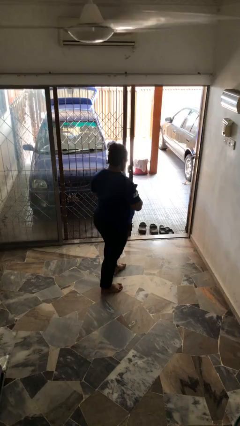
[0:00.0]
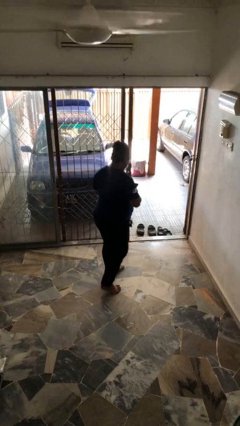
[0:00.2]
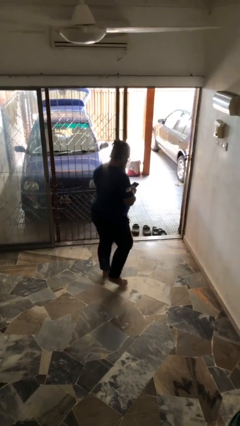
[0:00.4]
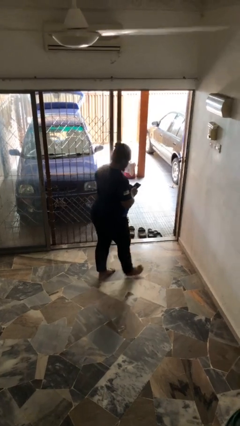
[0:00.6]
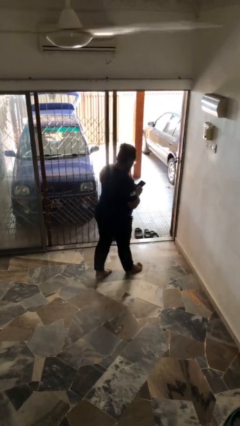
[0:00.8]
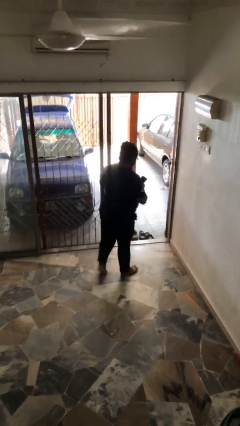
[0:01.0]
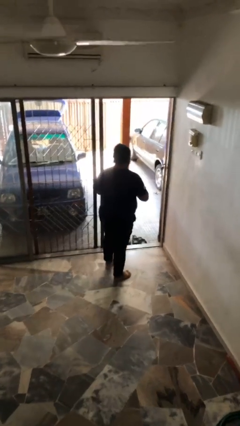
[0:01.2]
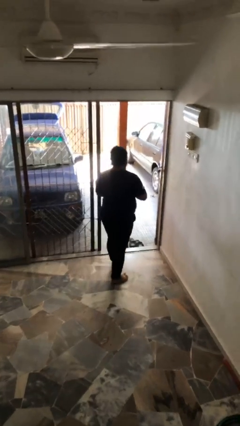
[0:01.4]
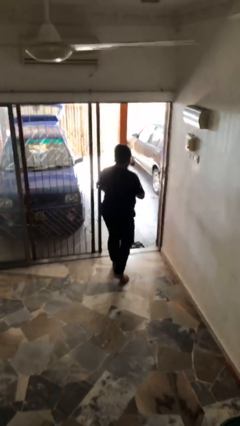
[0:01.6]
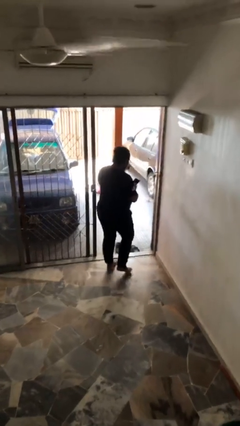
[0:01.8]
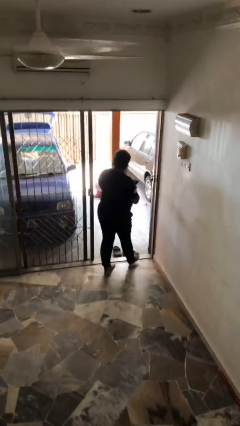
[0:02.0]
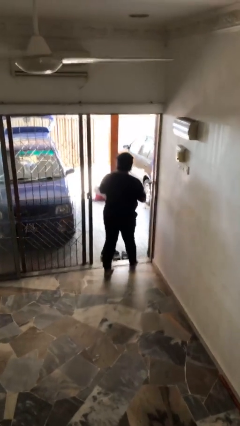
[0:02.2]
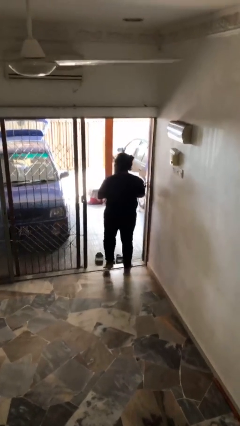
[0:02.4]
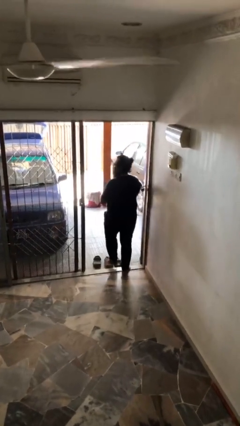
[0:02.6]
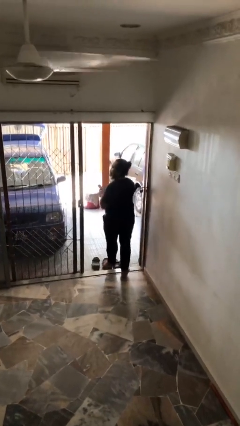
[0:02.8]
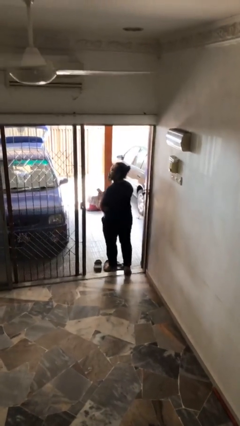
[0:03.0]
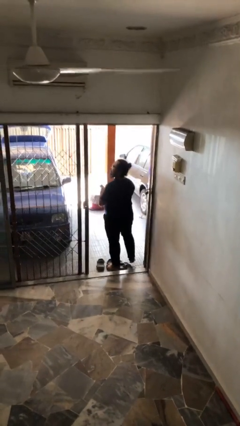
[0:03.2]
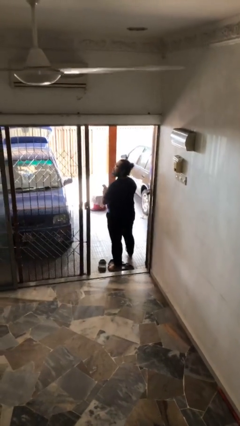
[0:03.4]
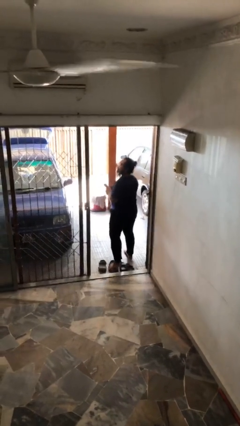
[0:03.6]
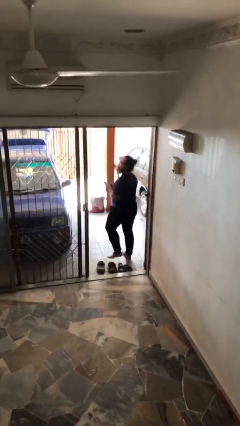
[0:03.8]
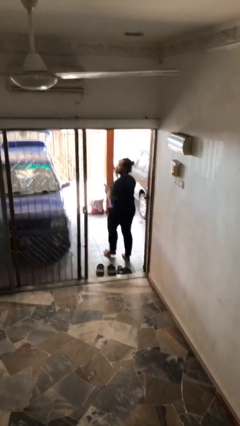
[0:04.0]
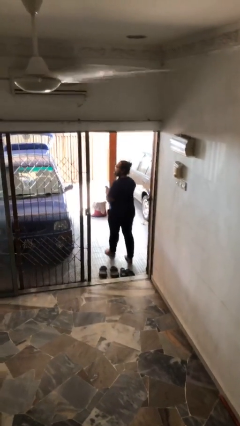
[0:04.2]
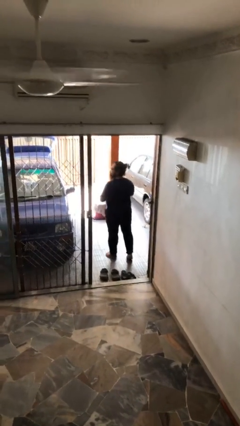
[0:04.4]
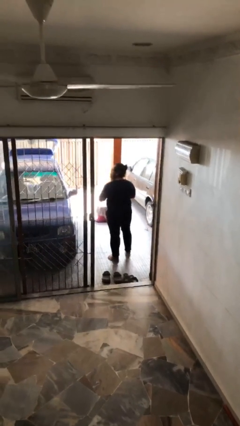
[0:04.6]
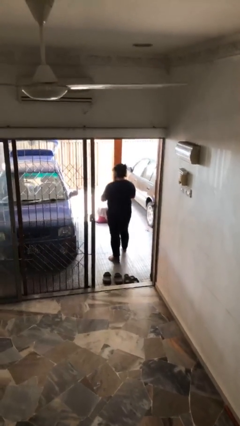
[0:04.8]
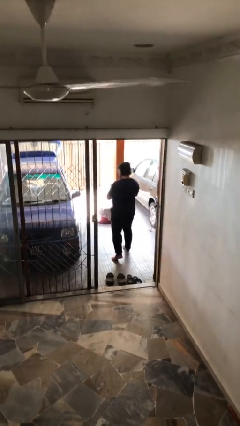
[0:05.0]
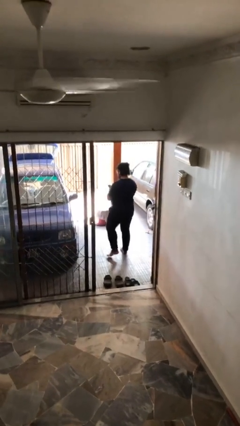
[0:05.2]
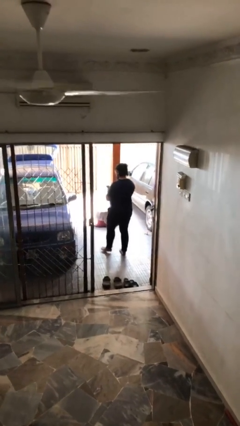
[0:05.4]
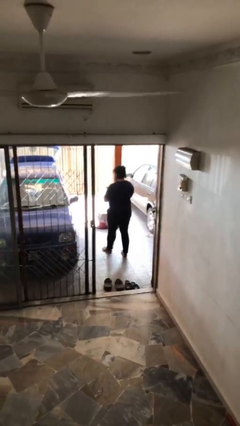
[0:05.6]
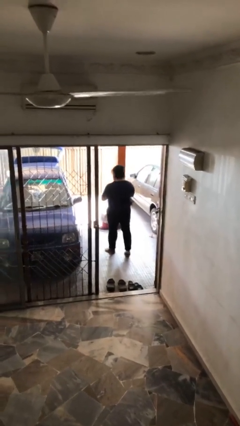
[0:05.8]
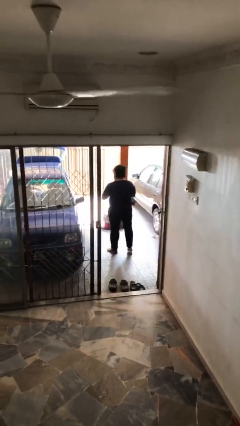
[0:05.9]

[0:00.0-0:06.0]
person exits scene through structure

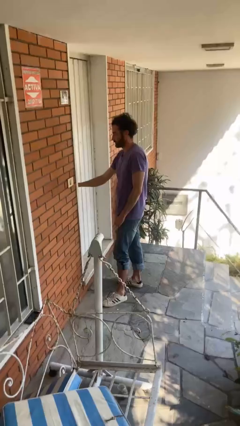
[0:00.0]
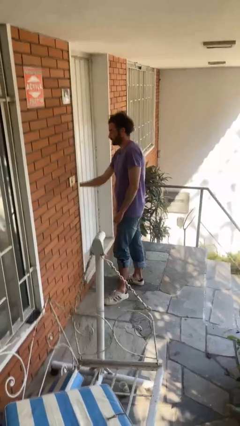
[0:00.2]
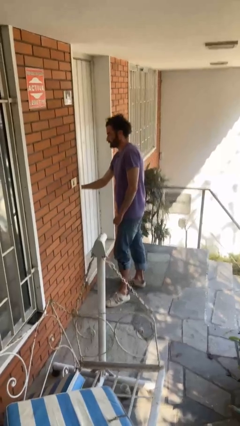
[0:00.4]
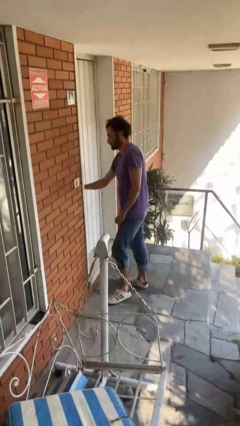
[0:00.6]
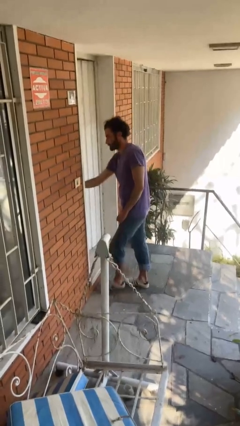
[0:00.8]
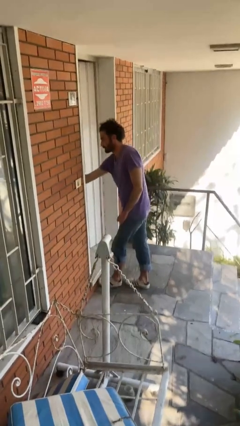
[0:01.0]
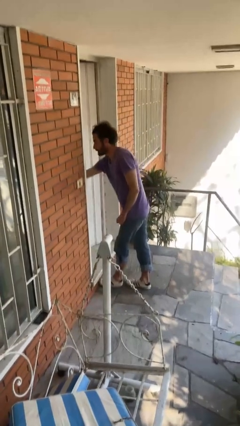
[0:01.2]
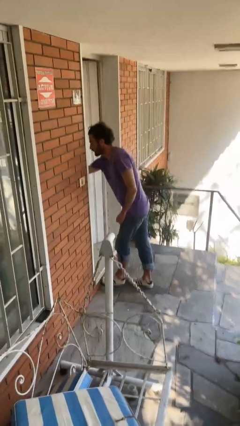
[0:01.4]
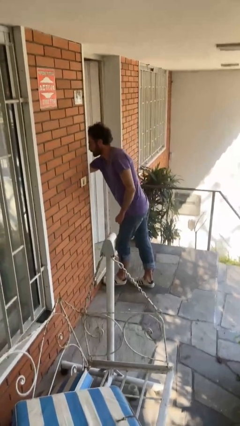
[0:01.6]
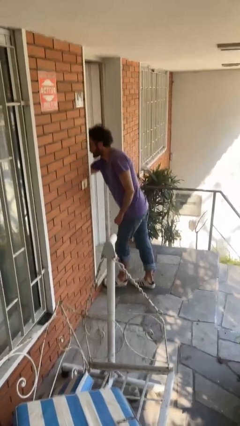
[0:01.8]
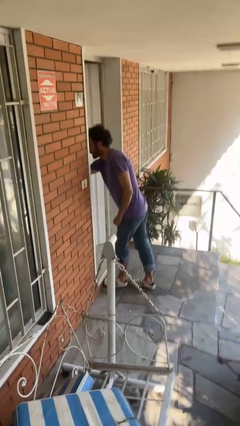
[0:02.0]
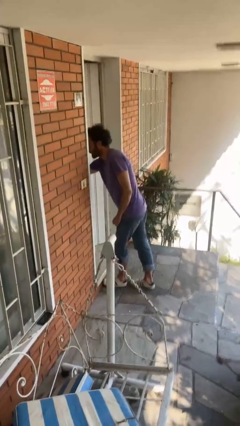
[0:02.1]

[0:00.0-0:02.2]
person opens facility door

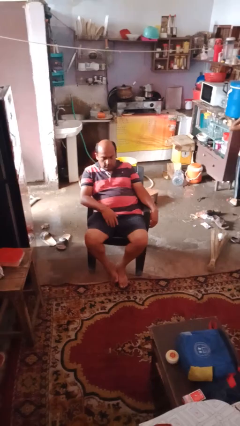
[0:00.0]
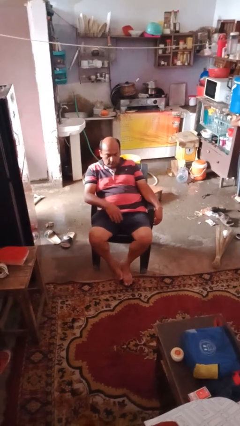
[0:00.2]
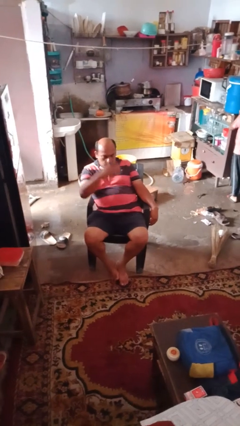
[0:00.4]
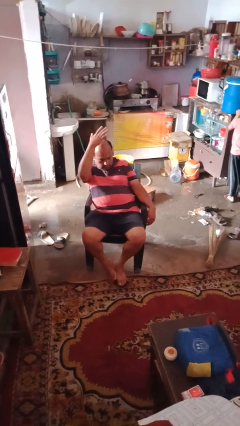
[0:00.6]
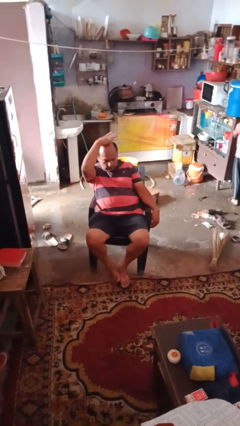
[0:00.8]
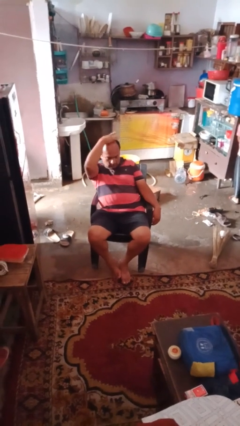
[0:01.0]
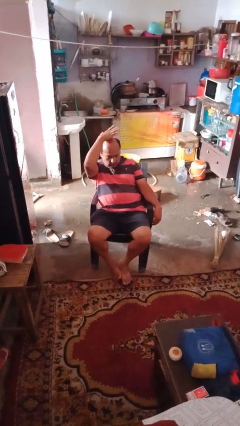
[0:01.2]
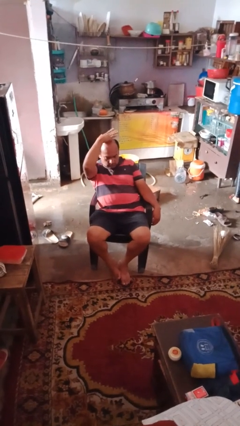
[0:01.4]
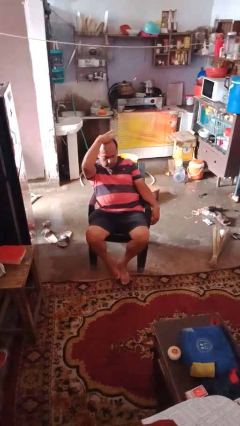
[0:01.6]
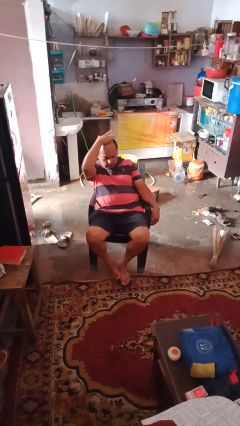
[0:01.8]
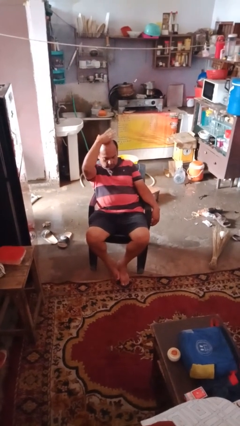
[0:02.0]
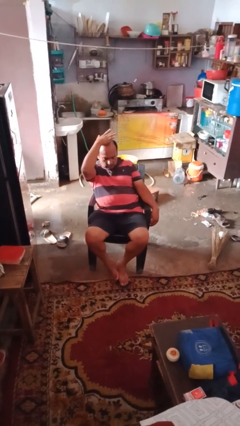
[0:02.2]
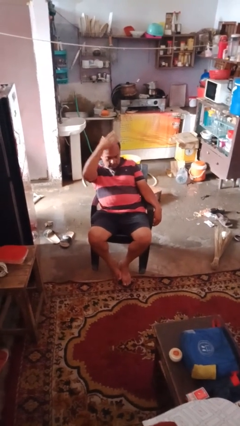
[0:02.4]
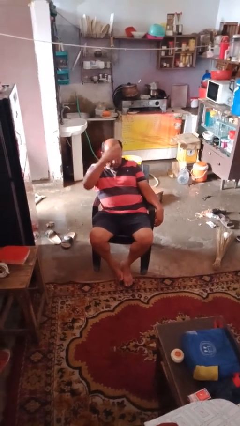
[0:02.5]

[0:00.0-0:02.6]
person pats head

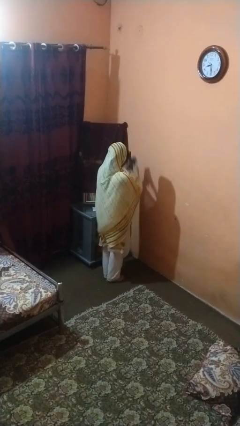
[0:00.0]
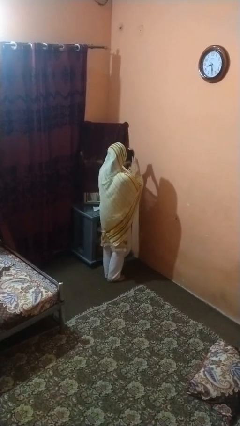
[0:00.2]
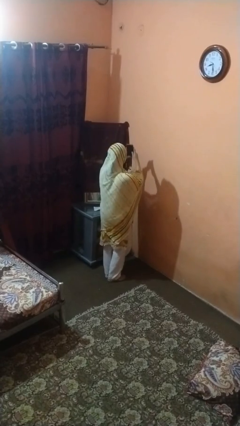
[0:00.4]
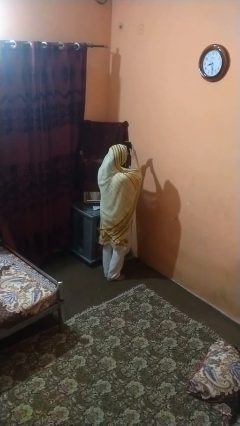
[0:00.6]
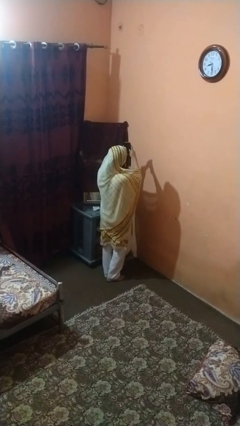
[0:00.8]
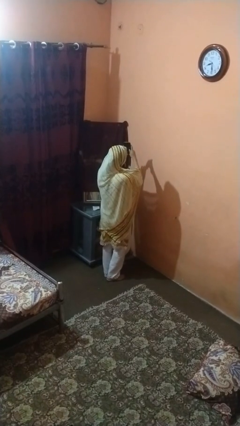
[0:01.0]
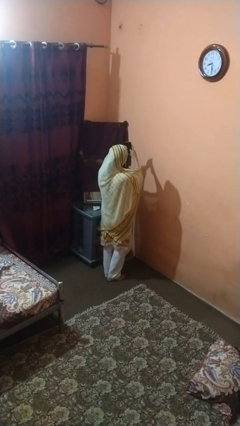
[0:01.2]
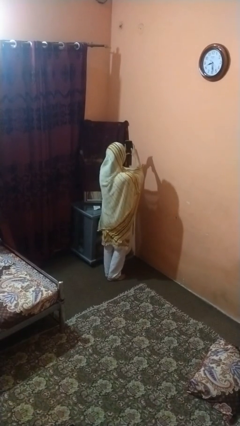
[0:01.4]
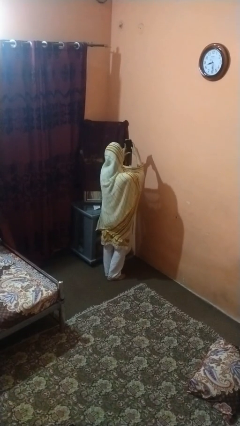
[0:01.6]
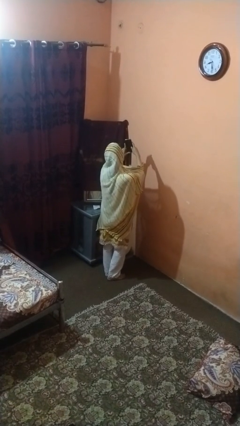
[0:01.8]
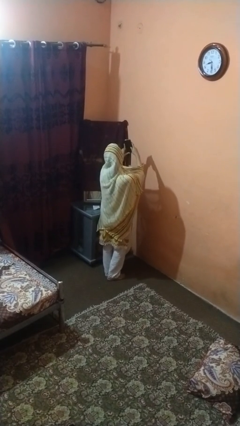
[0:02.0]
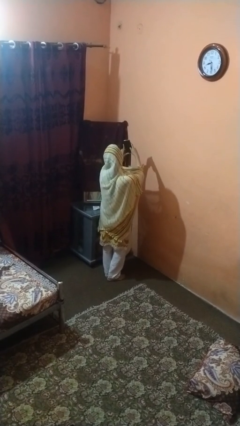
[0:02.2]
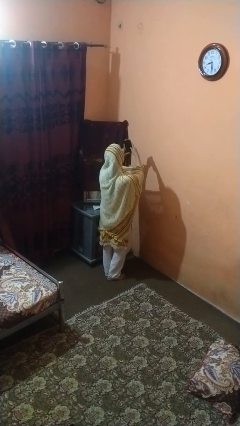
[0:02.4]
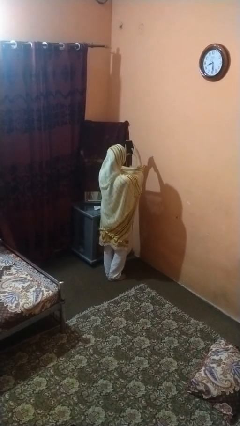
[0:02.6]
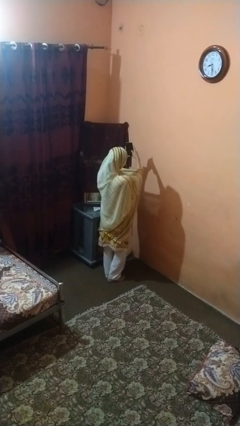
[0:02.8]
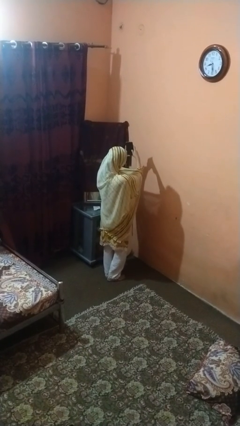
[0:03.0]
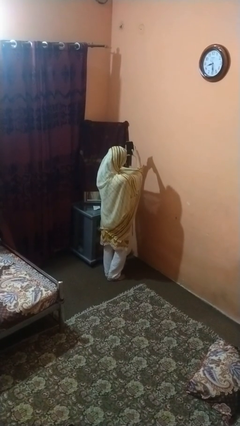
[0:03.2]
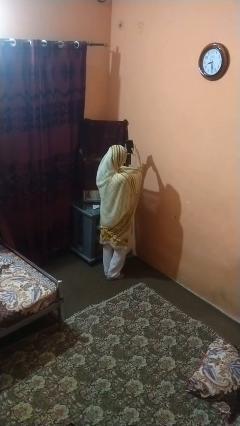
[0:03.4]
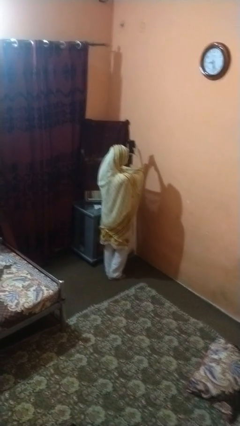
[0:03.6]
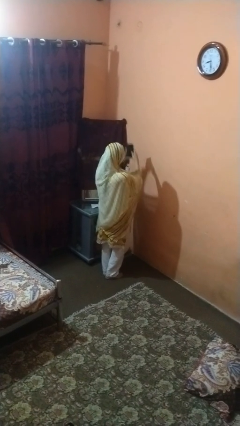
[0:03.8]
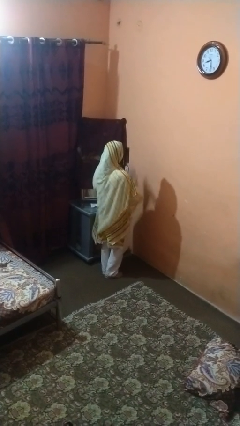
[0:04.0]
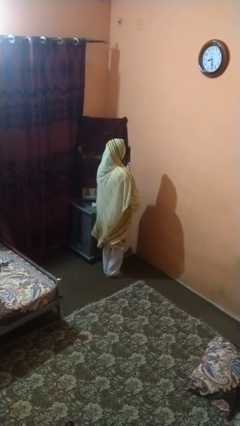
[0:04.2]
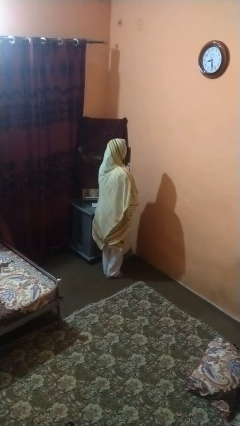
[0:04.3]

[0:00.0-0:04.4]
person takes selfie

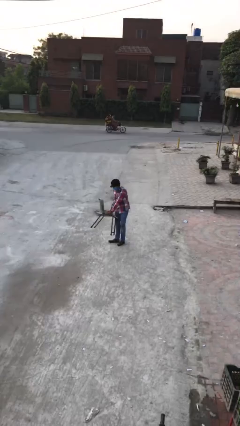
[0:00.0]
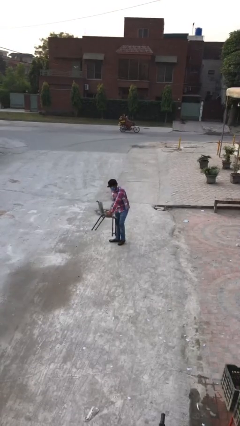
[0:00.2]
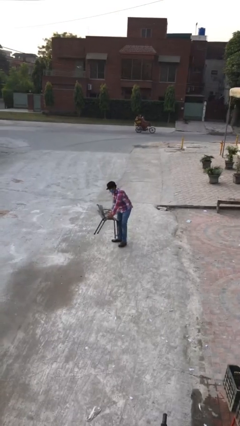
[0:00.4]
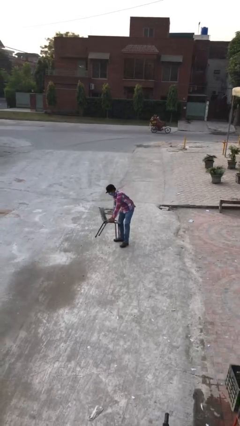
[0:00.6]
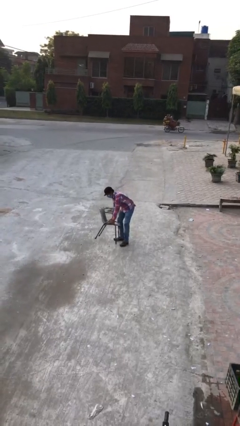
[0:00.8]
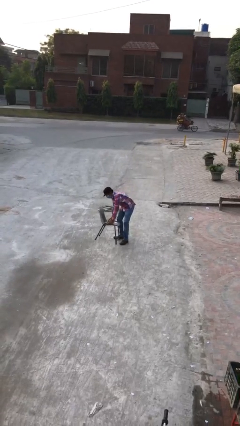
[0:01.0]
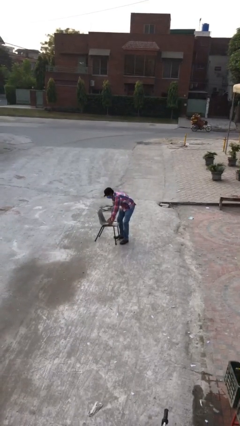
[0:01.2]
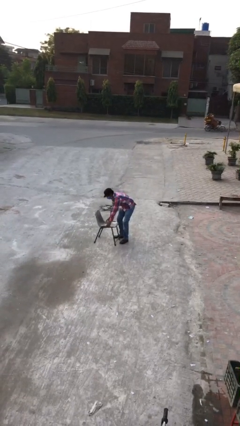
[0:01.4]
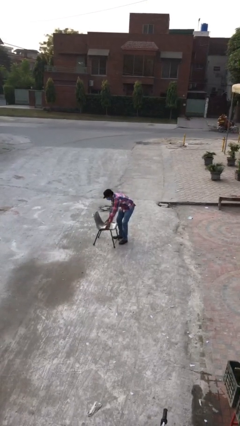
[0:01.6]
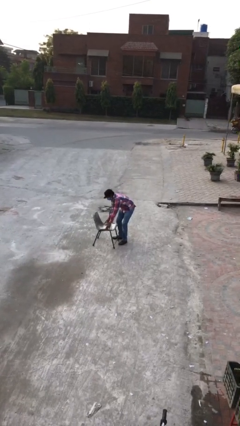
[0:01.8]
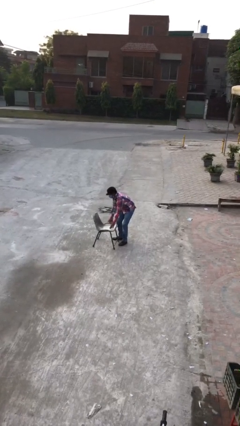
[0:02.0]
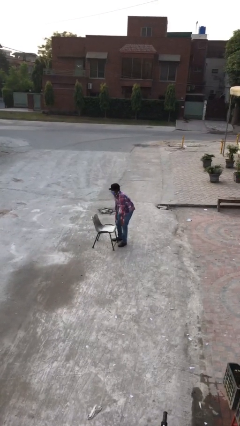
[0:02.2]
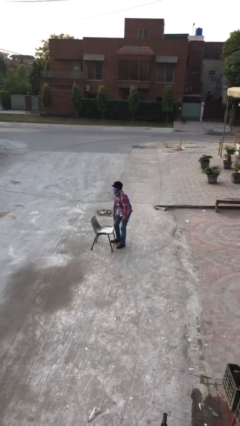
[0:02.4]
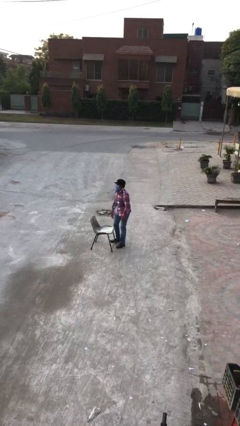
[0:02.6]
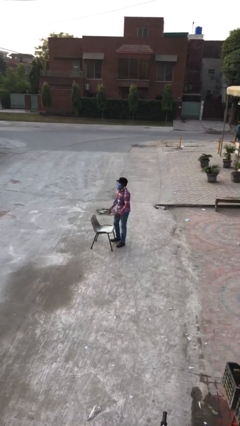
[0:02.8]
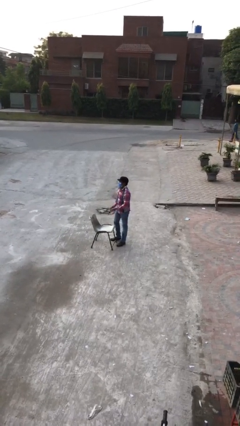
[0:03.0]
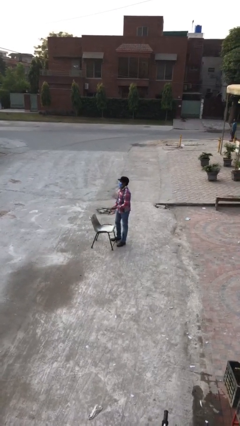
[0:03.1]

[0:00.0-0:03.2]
person puts down object on floor
